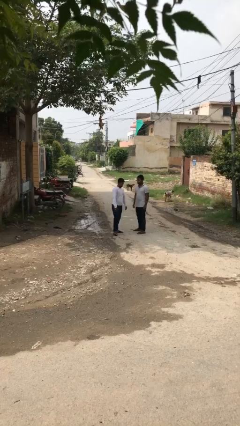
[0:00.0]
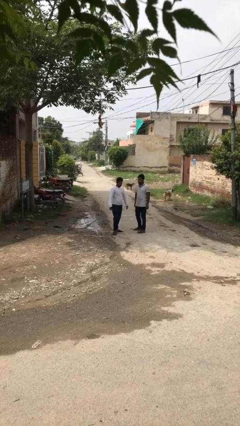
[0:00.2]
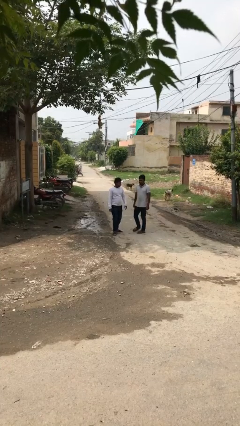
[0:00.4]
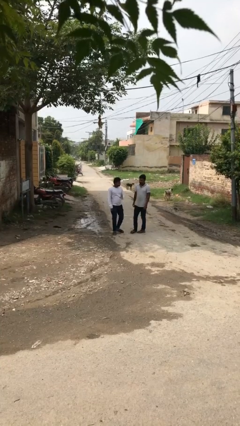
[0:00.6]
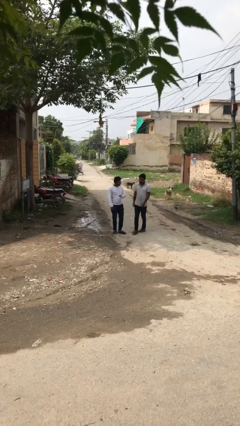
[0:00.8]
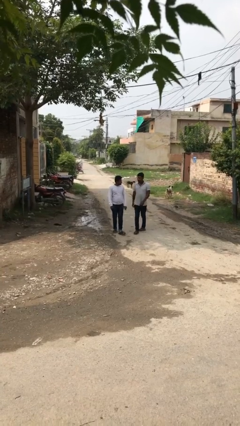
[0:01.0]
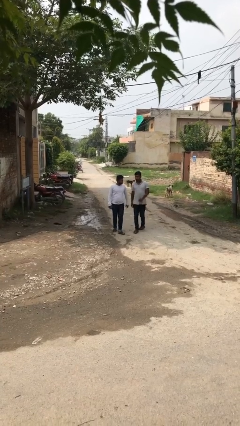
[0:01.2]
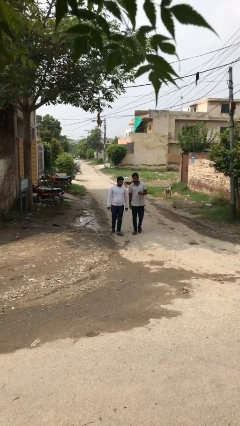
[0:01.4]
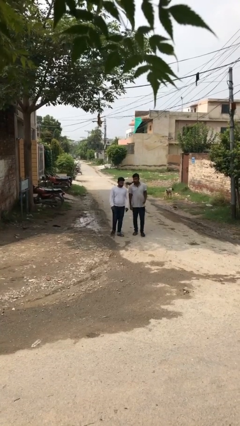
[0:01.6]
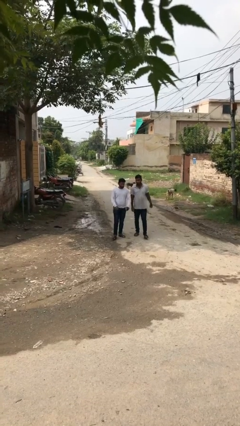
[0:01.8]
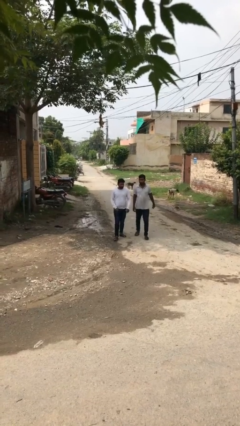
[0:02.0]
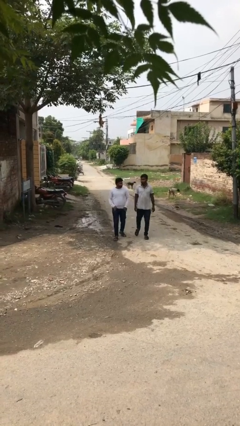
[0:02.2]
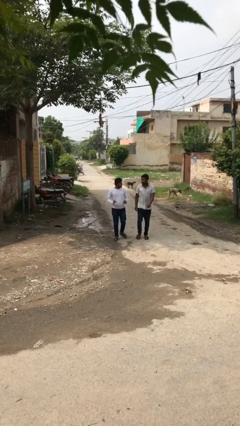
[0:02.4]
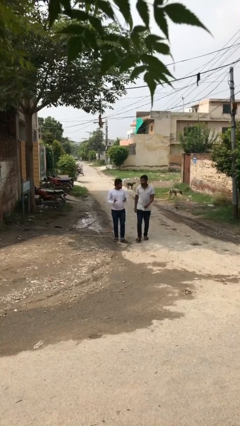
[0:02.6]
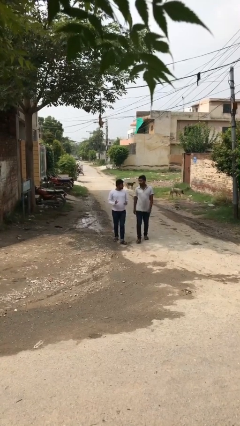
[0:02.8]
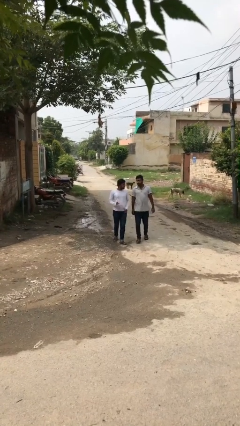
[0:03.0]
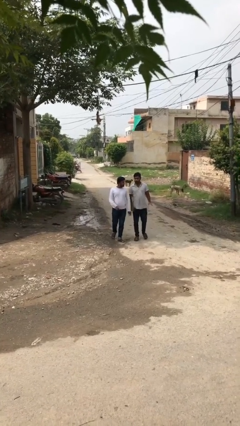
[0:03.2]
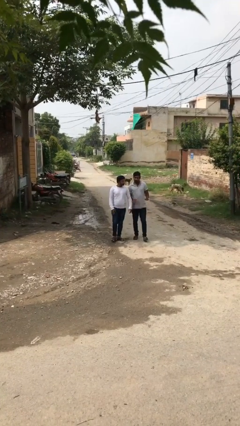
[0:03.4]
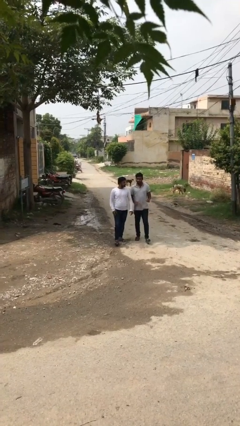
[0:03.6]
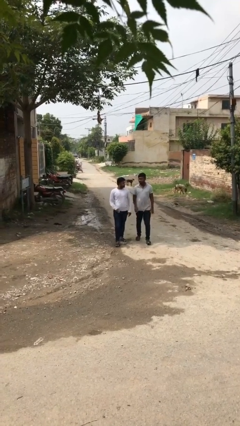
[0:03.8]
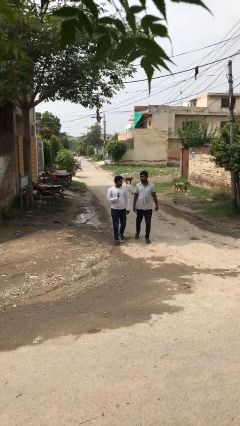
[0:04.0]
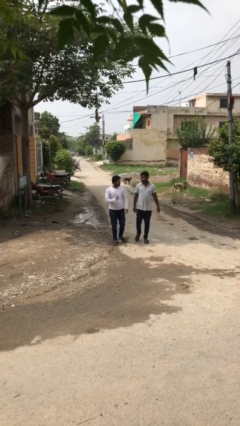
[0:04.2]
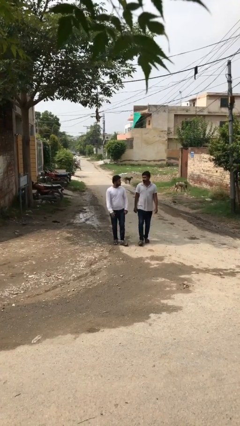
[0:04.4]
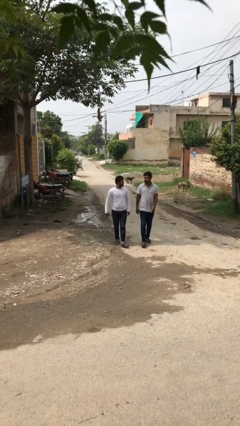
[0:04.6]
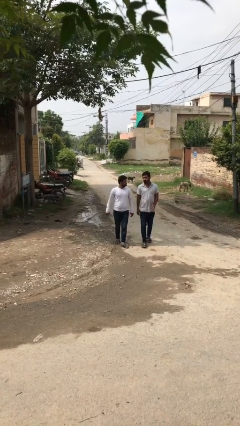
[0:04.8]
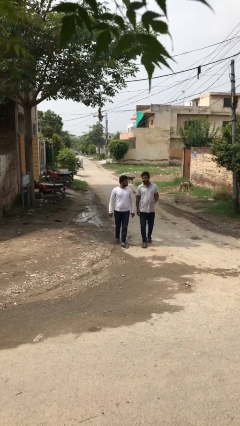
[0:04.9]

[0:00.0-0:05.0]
person talks to person

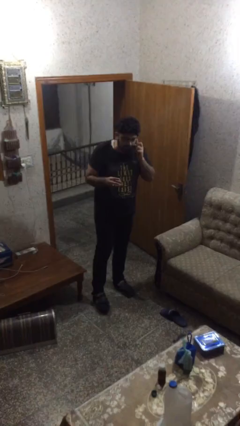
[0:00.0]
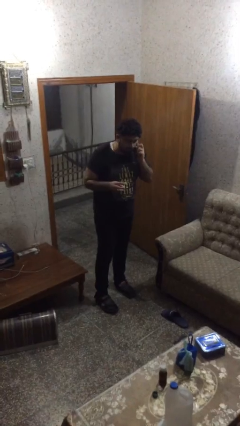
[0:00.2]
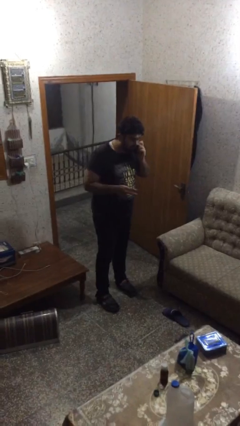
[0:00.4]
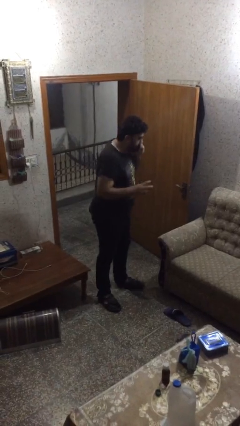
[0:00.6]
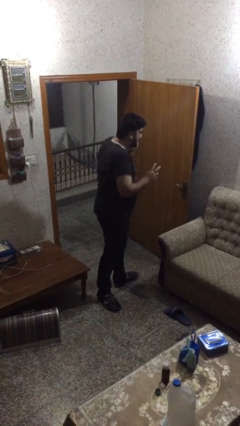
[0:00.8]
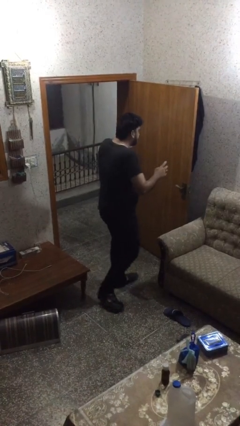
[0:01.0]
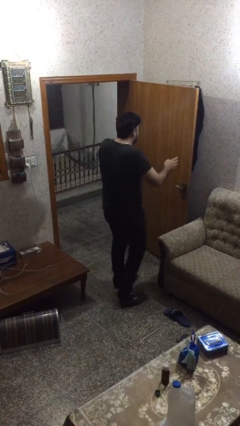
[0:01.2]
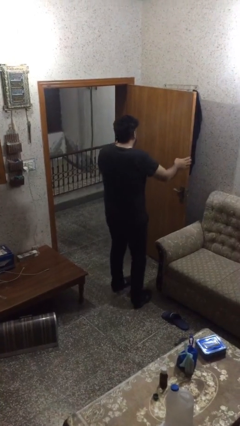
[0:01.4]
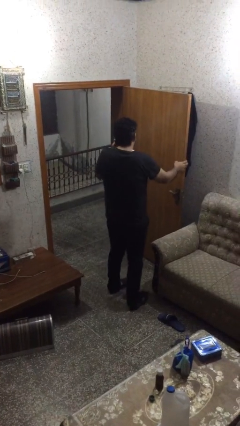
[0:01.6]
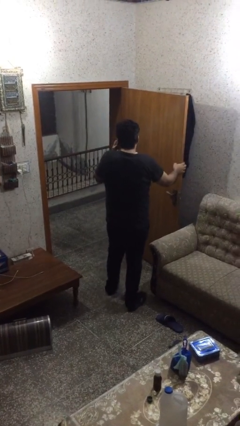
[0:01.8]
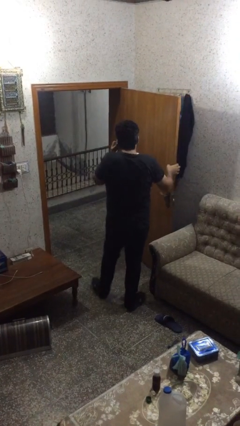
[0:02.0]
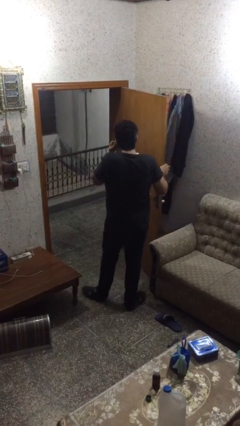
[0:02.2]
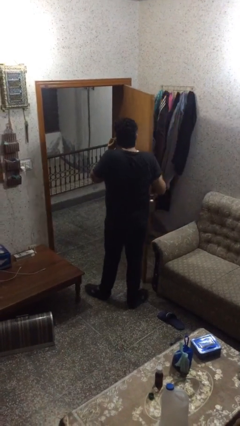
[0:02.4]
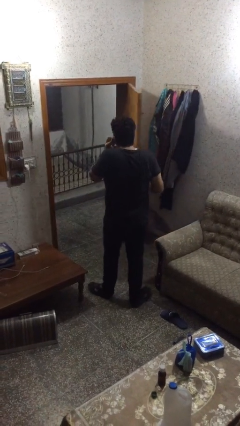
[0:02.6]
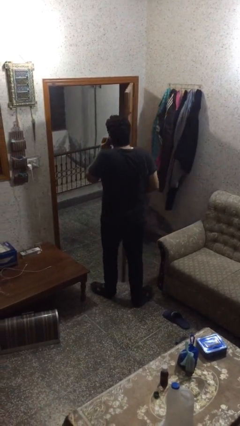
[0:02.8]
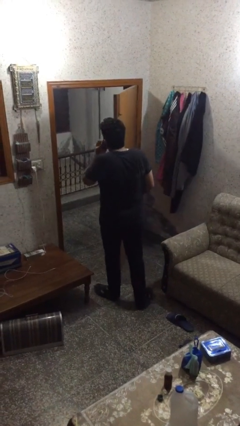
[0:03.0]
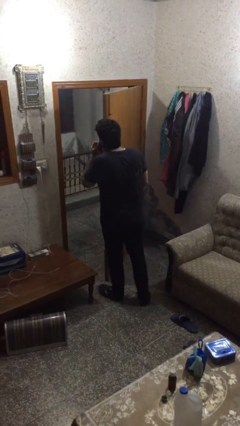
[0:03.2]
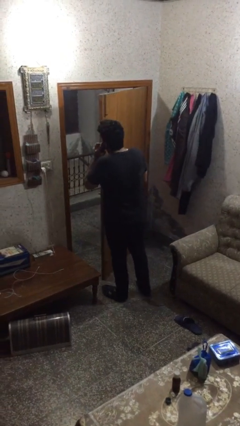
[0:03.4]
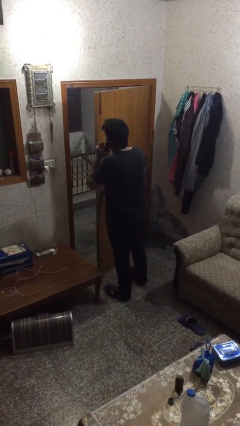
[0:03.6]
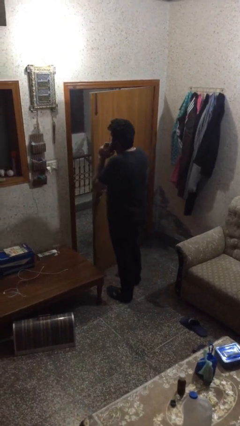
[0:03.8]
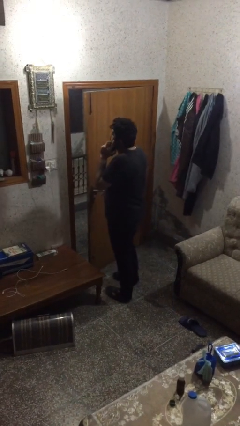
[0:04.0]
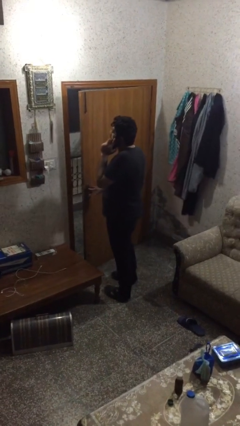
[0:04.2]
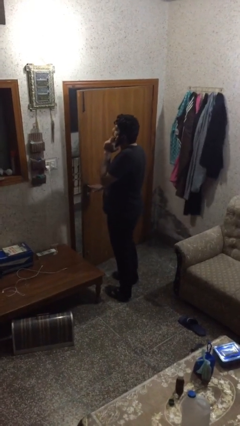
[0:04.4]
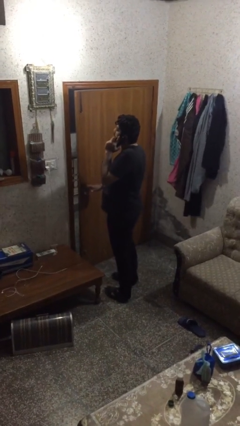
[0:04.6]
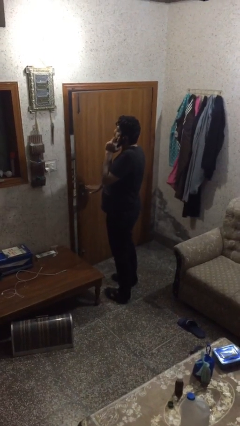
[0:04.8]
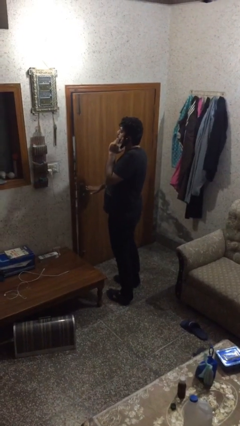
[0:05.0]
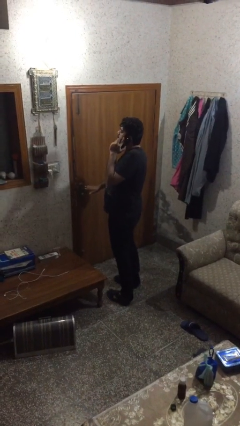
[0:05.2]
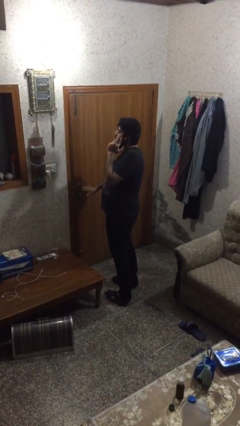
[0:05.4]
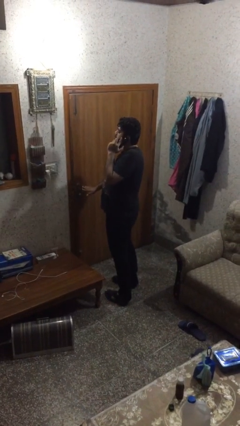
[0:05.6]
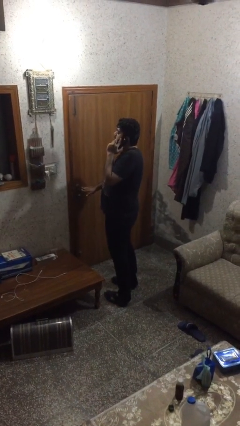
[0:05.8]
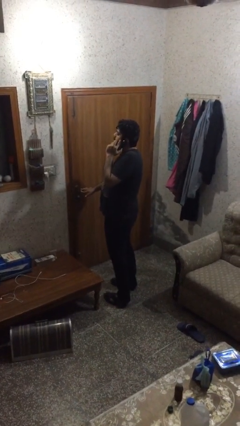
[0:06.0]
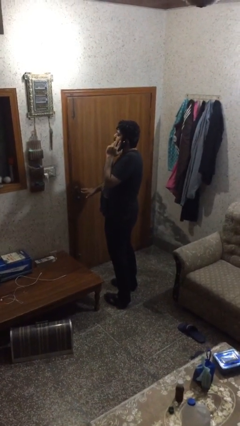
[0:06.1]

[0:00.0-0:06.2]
person closes facility door

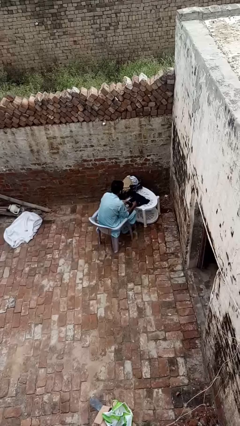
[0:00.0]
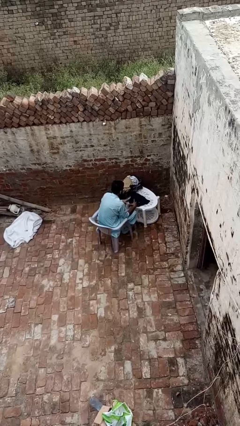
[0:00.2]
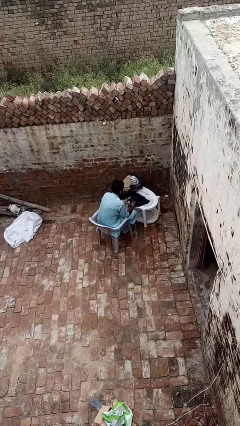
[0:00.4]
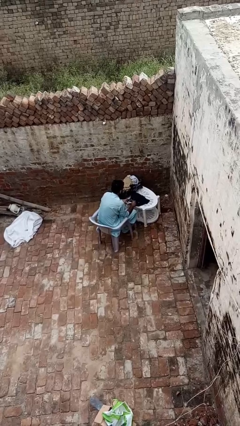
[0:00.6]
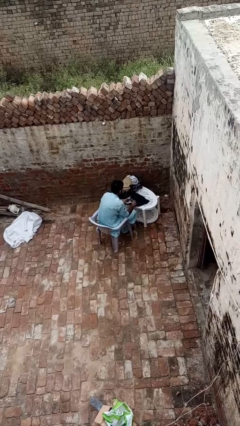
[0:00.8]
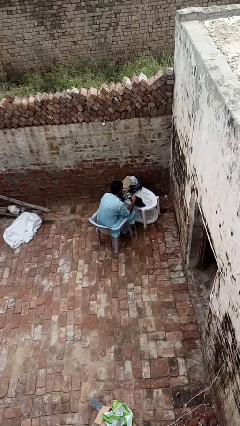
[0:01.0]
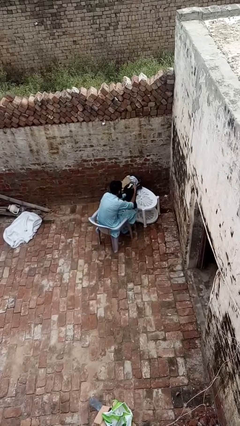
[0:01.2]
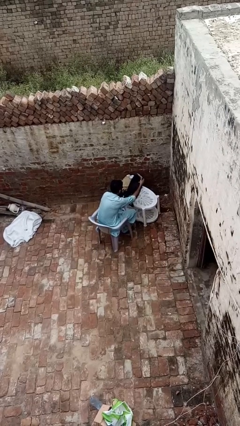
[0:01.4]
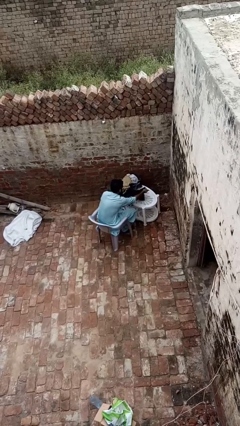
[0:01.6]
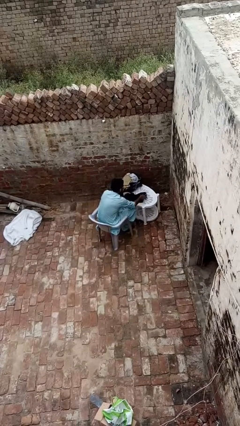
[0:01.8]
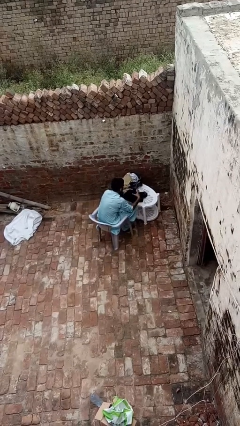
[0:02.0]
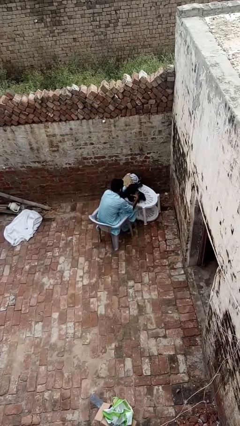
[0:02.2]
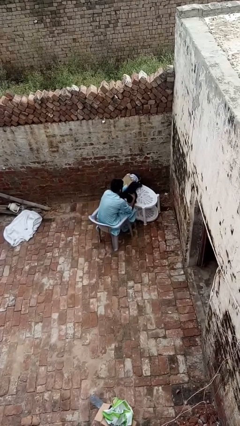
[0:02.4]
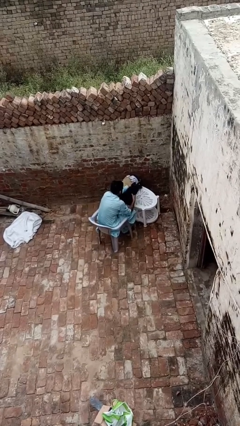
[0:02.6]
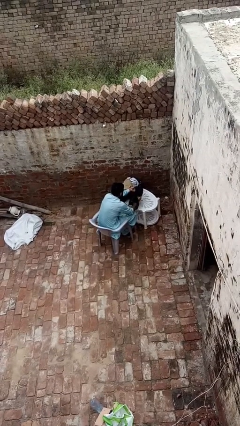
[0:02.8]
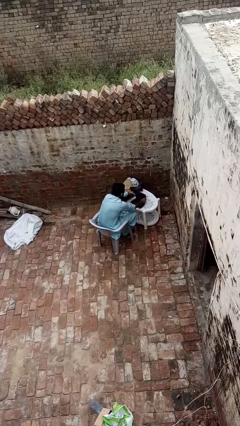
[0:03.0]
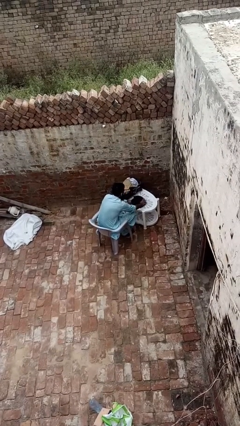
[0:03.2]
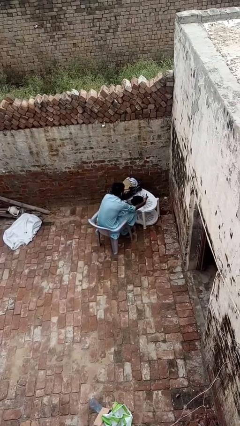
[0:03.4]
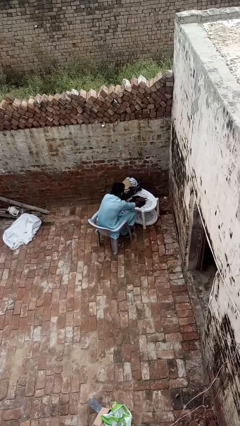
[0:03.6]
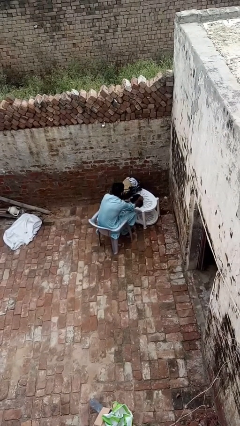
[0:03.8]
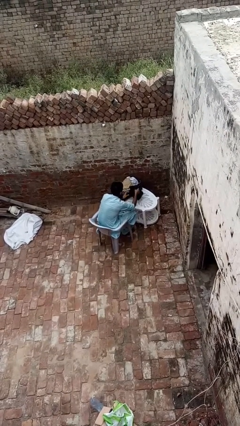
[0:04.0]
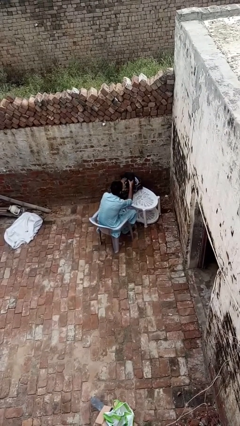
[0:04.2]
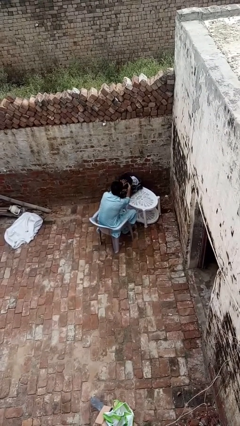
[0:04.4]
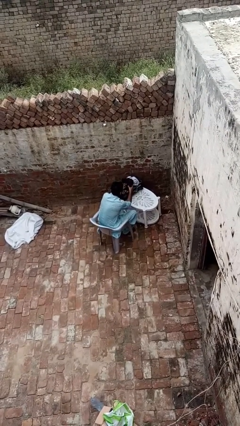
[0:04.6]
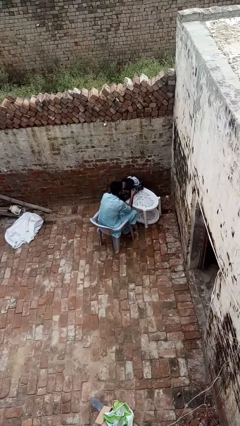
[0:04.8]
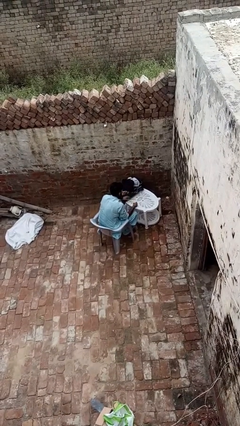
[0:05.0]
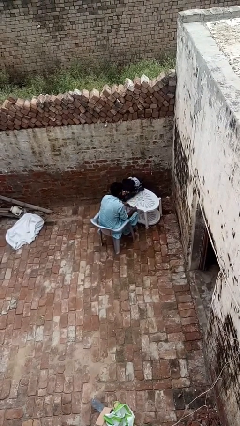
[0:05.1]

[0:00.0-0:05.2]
person folds pants

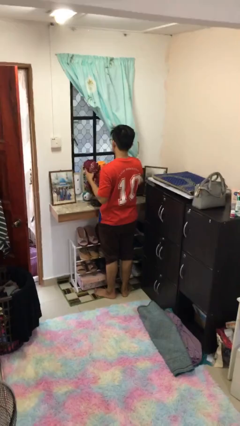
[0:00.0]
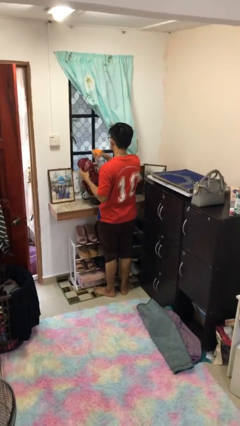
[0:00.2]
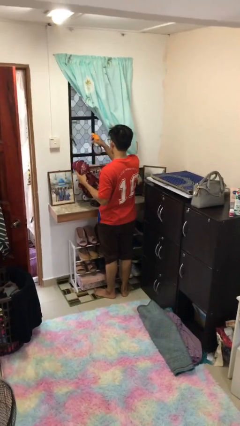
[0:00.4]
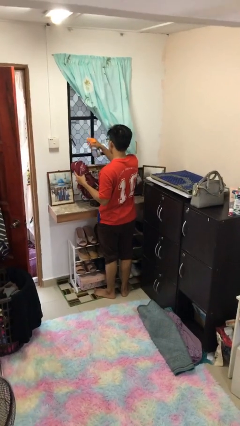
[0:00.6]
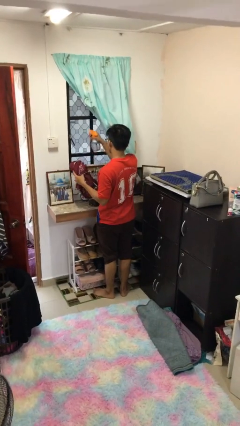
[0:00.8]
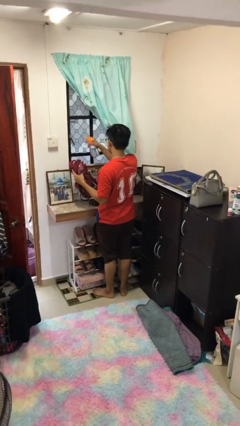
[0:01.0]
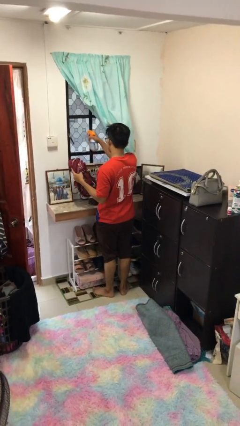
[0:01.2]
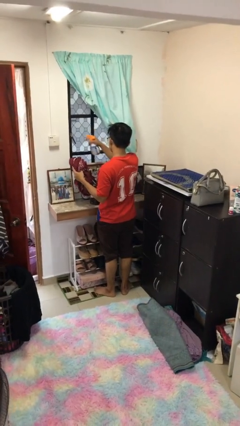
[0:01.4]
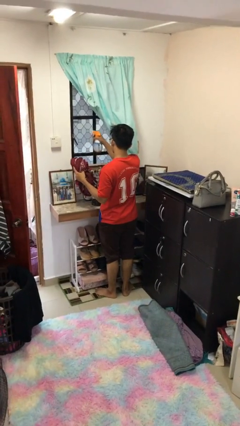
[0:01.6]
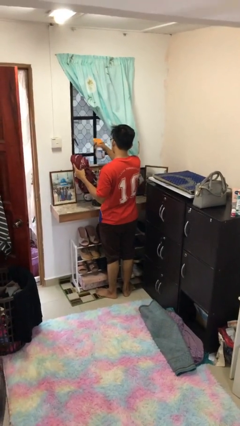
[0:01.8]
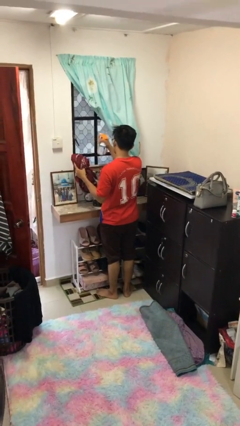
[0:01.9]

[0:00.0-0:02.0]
person sprays from bottle
